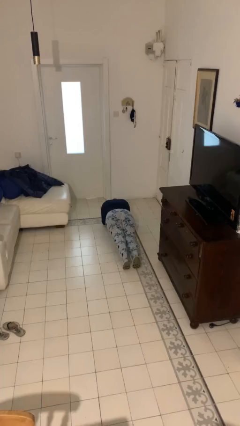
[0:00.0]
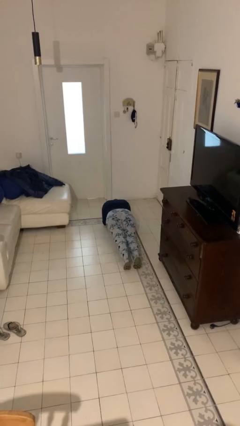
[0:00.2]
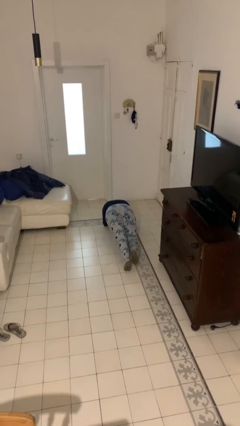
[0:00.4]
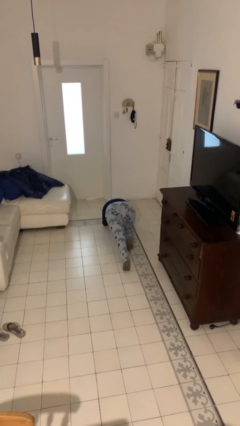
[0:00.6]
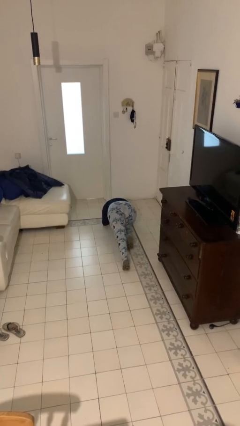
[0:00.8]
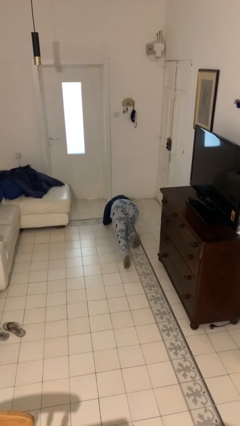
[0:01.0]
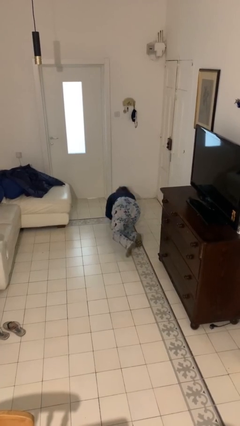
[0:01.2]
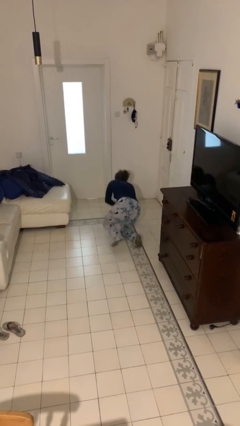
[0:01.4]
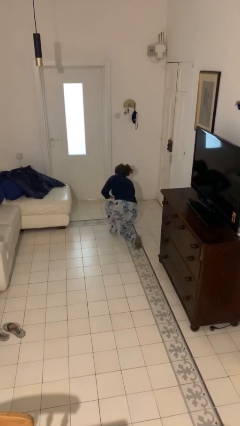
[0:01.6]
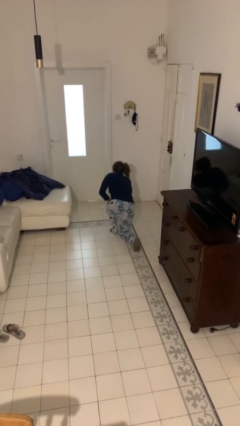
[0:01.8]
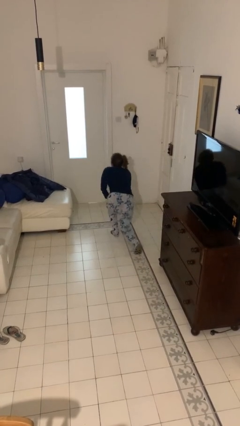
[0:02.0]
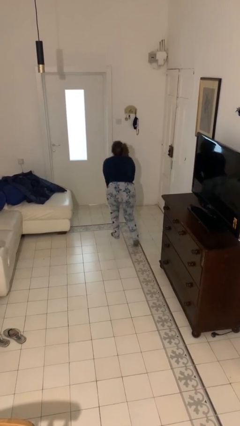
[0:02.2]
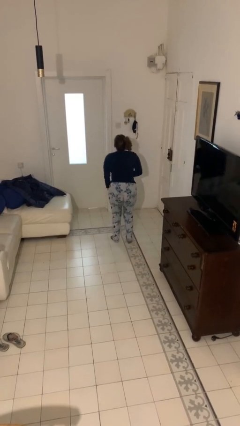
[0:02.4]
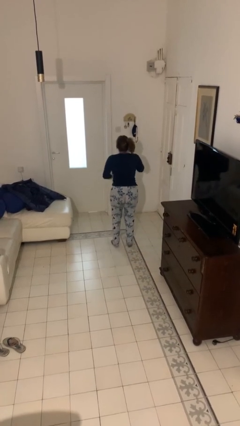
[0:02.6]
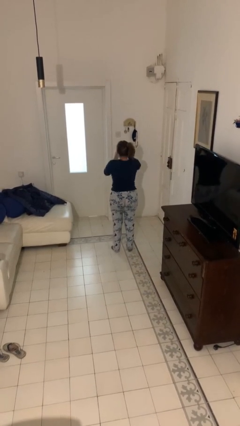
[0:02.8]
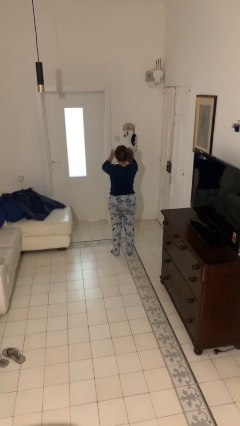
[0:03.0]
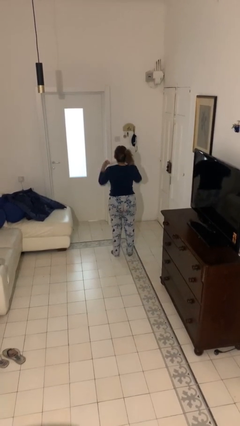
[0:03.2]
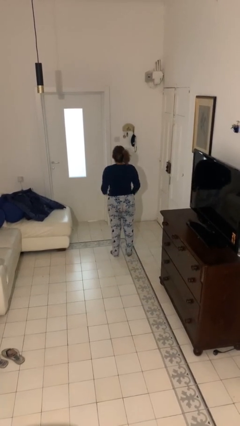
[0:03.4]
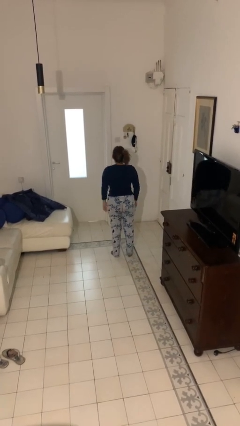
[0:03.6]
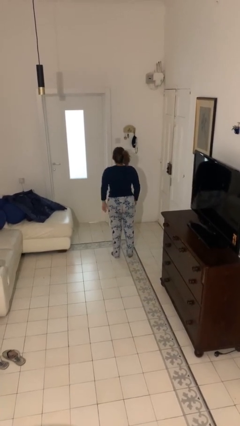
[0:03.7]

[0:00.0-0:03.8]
person stands up from floor

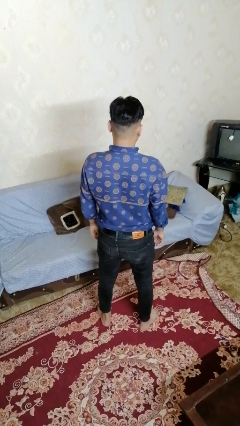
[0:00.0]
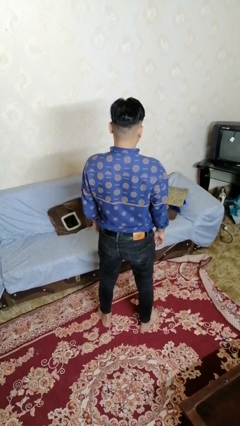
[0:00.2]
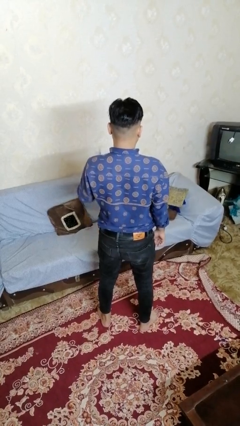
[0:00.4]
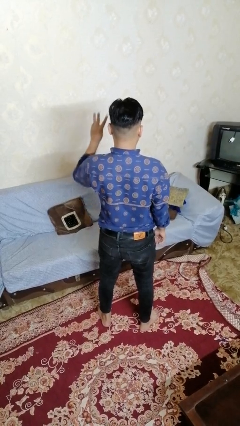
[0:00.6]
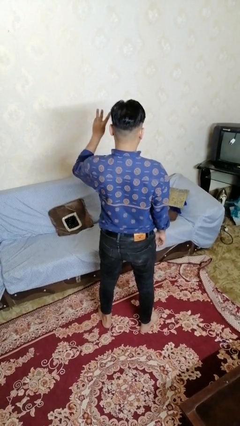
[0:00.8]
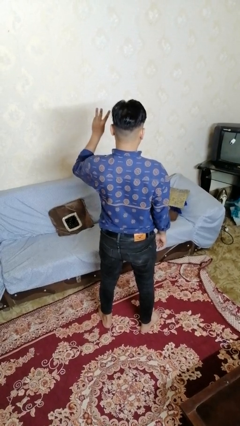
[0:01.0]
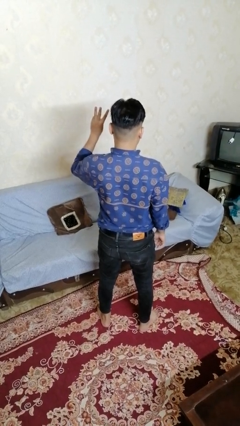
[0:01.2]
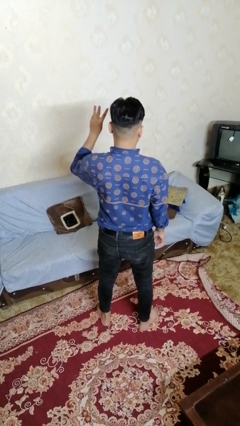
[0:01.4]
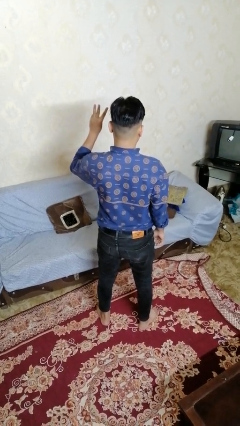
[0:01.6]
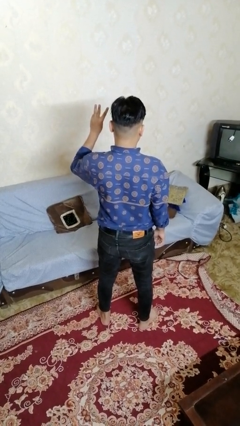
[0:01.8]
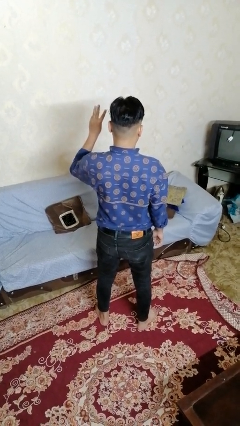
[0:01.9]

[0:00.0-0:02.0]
person gestures number three

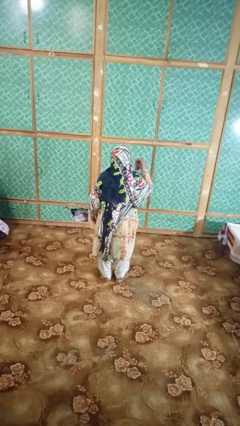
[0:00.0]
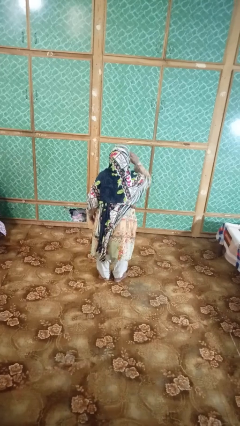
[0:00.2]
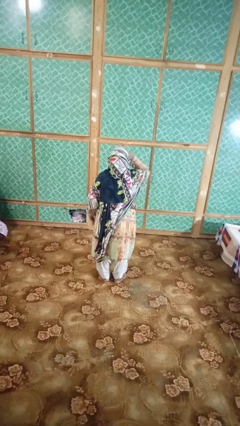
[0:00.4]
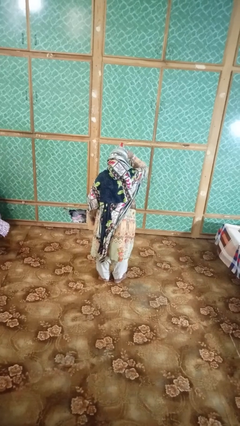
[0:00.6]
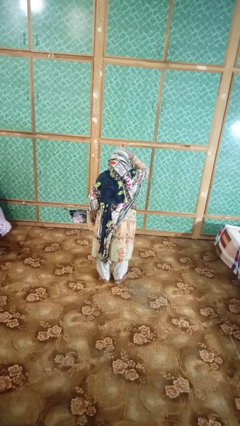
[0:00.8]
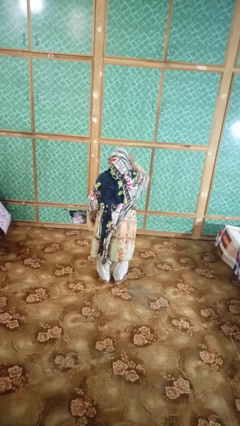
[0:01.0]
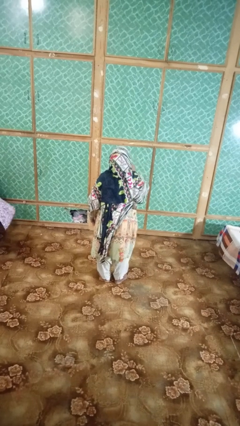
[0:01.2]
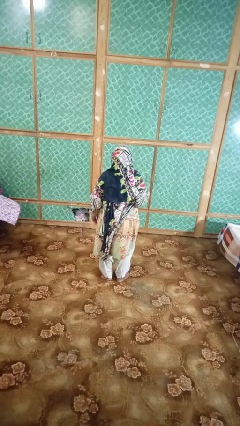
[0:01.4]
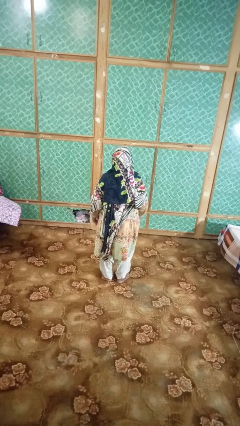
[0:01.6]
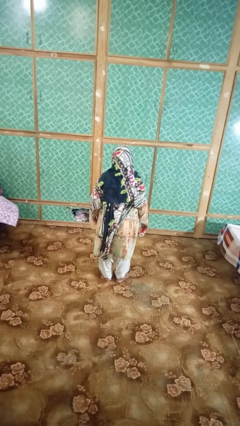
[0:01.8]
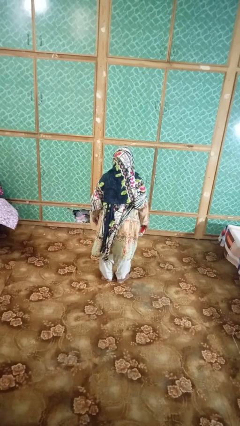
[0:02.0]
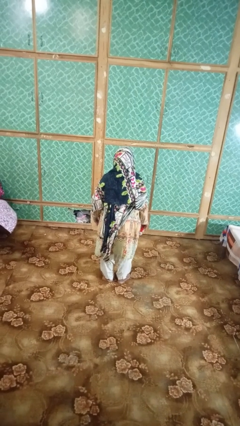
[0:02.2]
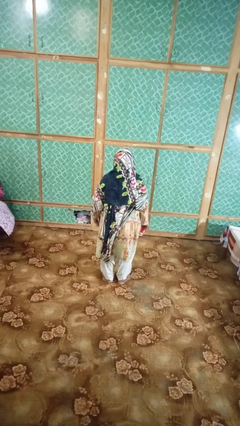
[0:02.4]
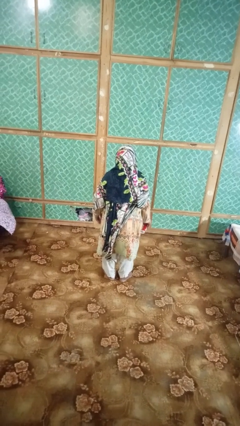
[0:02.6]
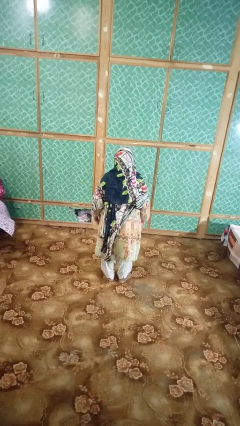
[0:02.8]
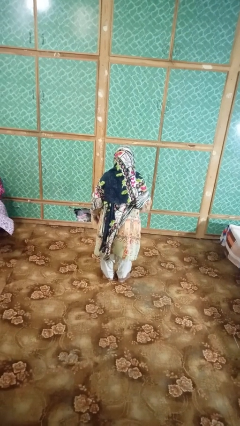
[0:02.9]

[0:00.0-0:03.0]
person drinks from beverage can

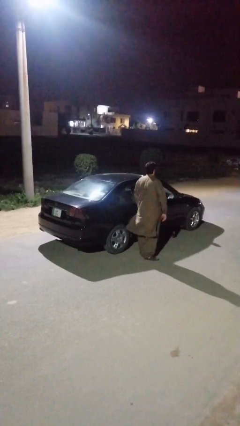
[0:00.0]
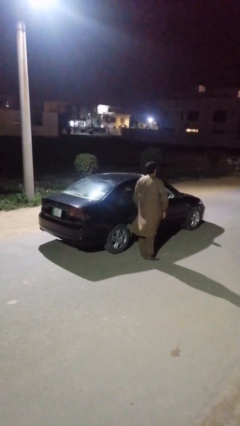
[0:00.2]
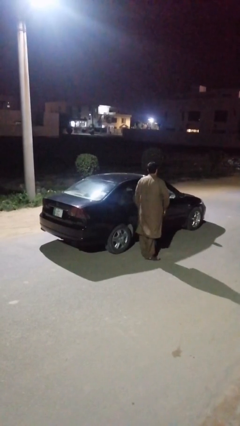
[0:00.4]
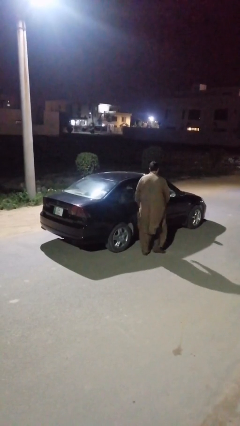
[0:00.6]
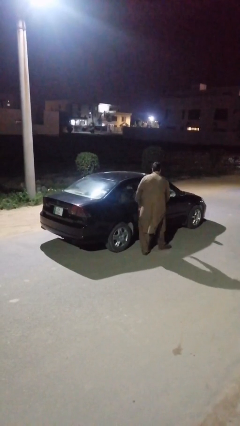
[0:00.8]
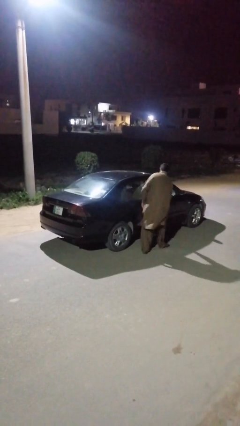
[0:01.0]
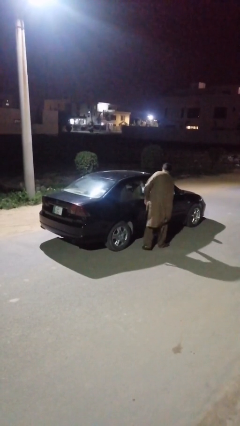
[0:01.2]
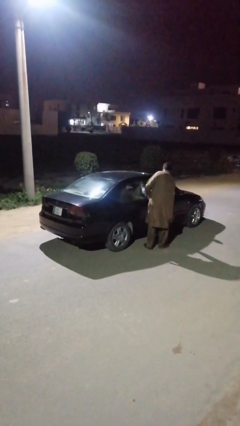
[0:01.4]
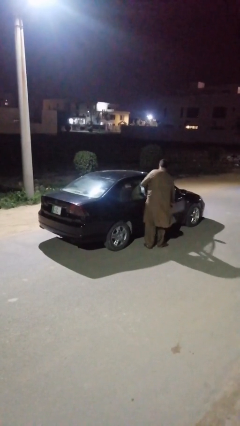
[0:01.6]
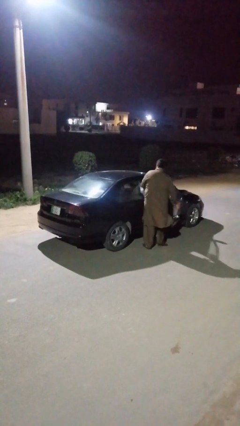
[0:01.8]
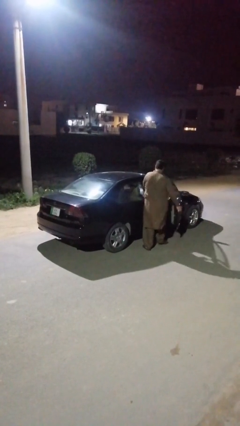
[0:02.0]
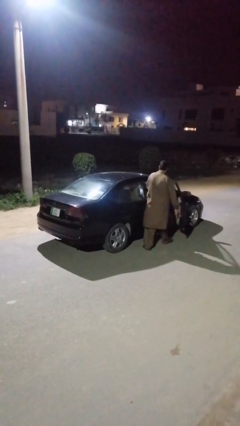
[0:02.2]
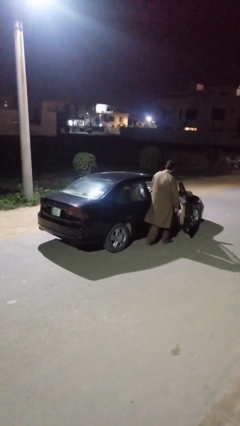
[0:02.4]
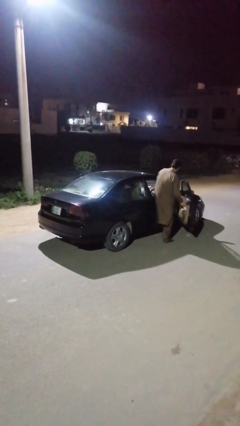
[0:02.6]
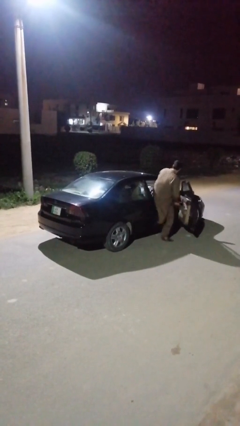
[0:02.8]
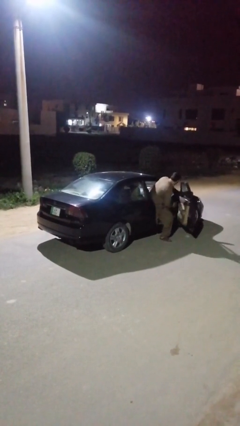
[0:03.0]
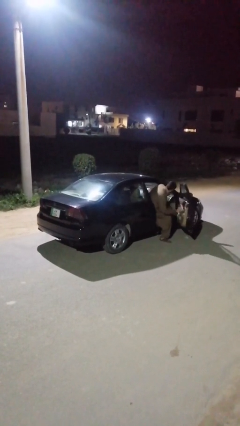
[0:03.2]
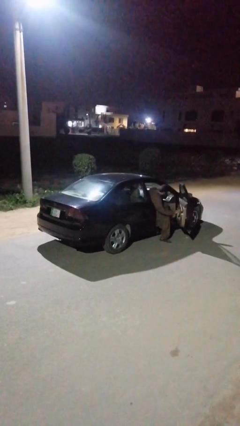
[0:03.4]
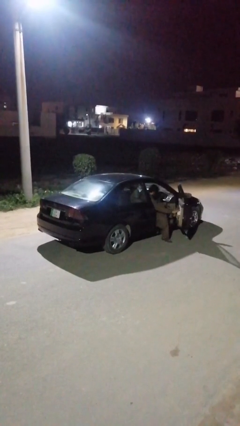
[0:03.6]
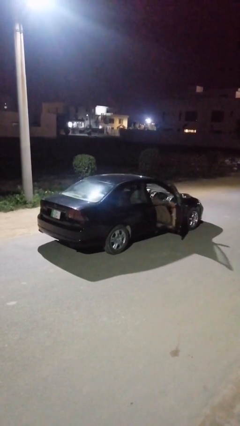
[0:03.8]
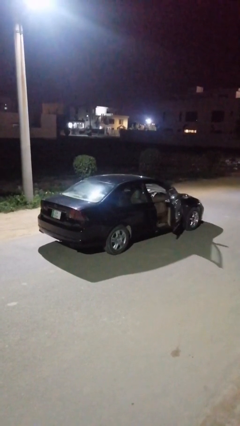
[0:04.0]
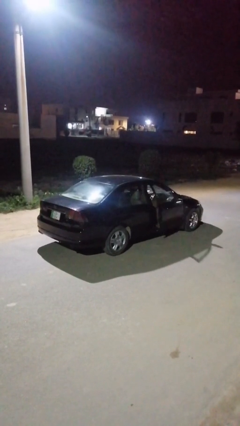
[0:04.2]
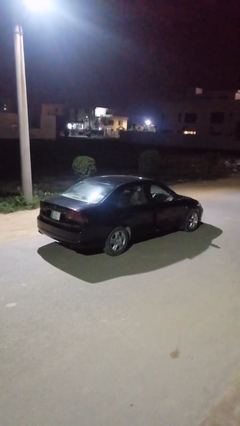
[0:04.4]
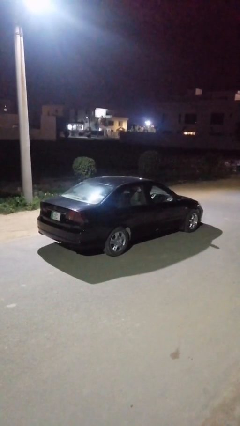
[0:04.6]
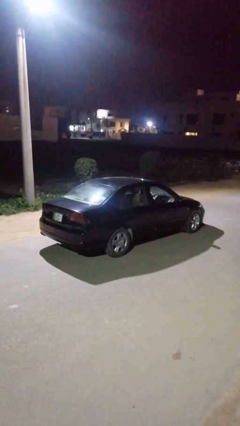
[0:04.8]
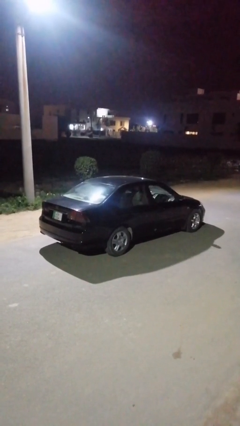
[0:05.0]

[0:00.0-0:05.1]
car picks up person

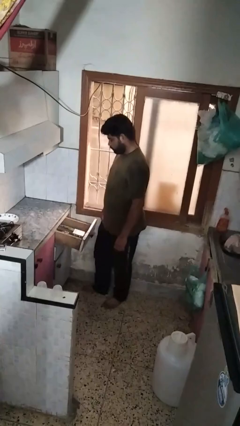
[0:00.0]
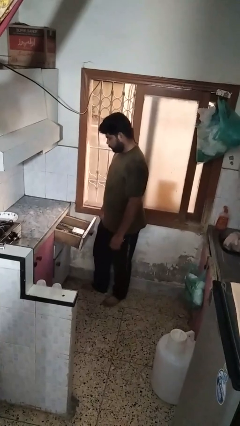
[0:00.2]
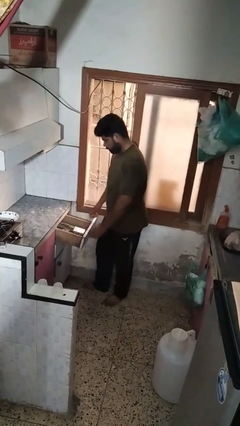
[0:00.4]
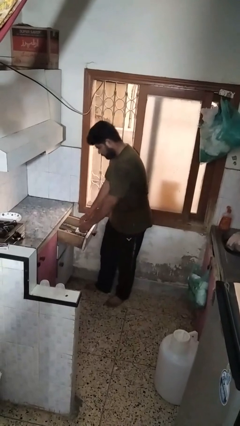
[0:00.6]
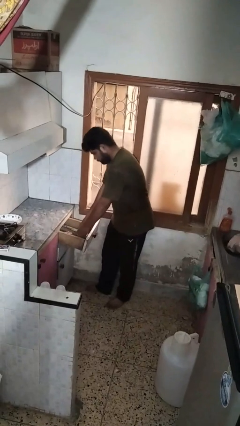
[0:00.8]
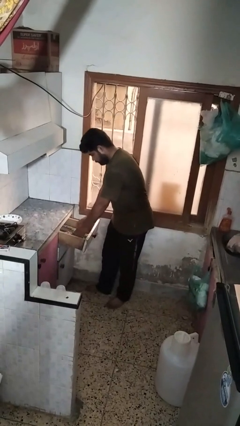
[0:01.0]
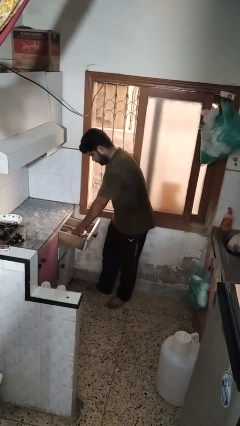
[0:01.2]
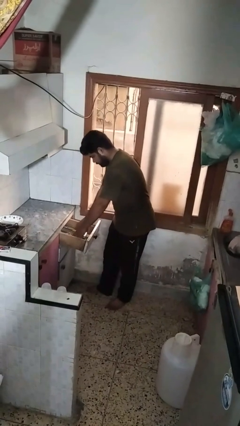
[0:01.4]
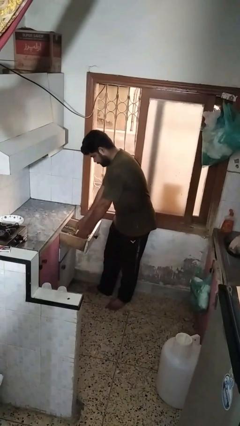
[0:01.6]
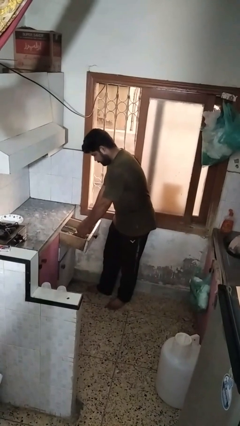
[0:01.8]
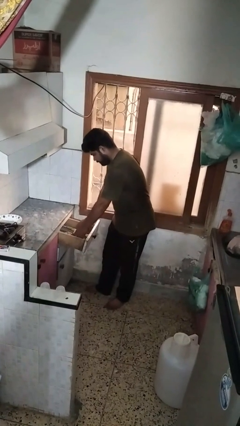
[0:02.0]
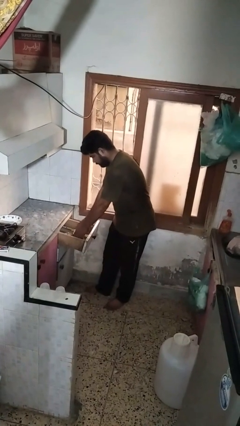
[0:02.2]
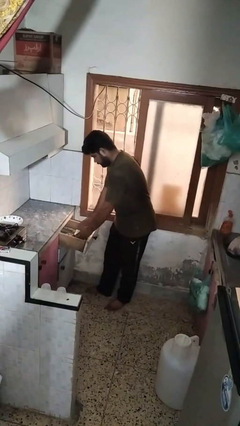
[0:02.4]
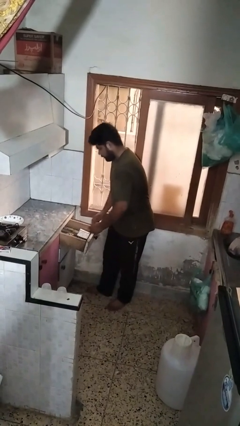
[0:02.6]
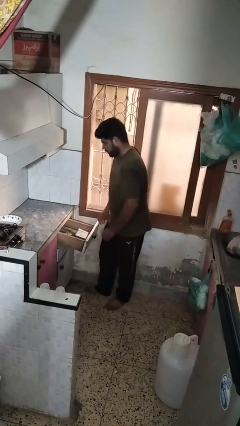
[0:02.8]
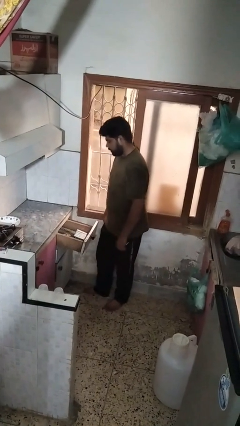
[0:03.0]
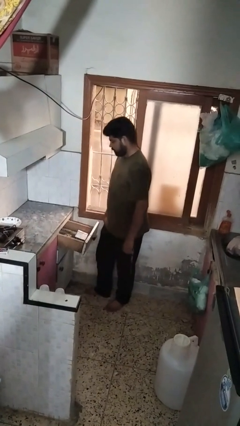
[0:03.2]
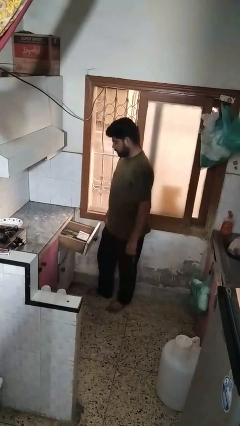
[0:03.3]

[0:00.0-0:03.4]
person searches in kitchen drawer

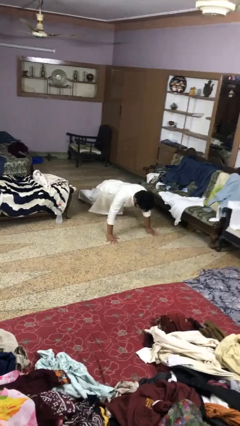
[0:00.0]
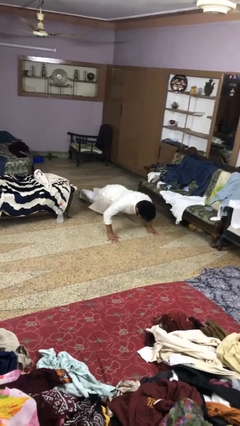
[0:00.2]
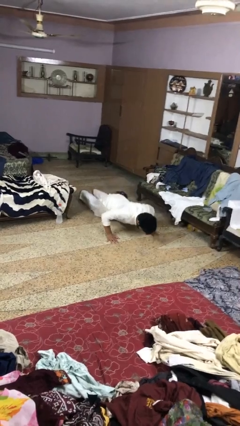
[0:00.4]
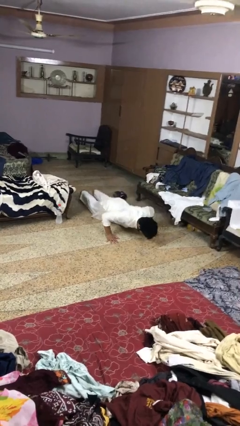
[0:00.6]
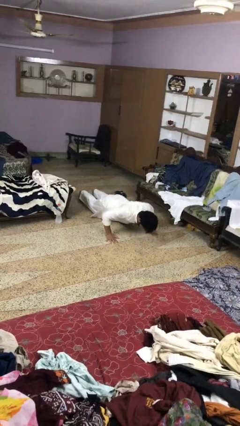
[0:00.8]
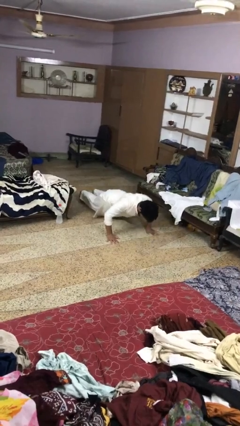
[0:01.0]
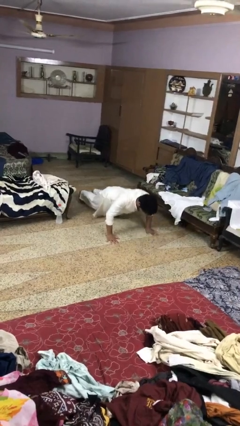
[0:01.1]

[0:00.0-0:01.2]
person exercises with pushup
